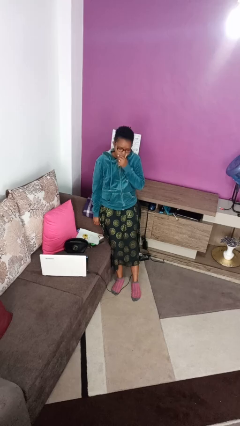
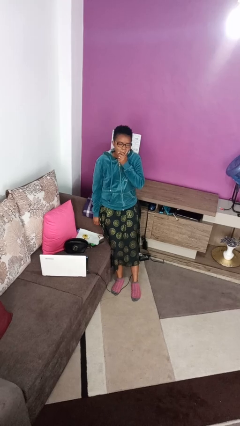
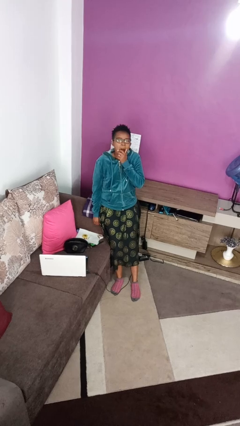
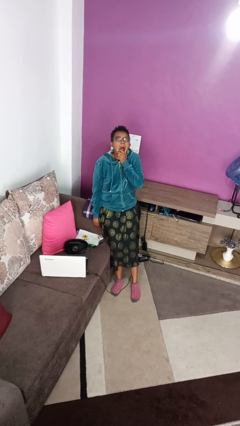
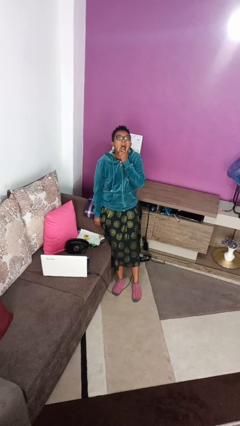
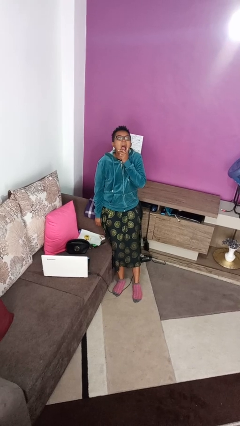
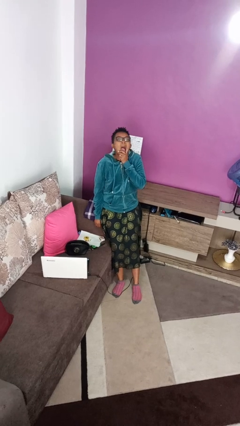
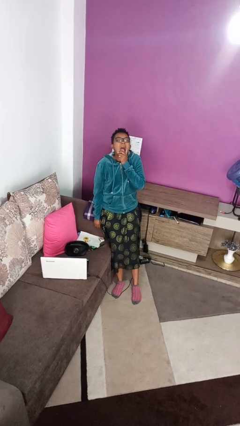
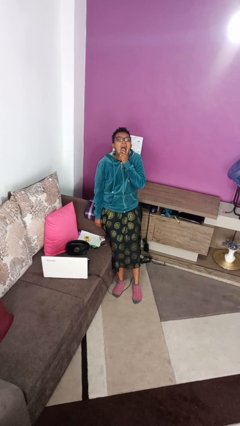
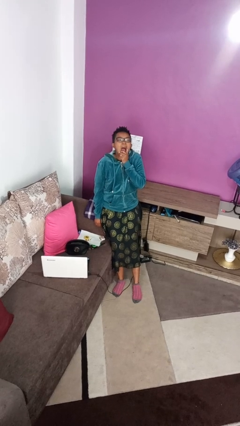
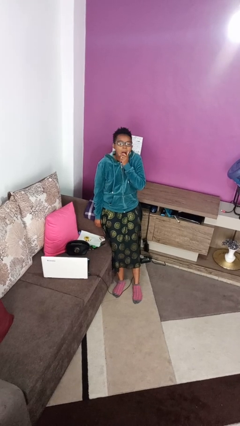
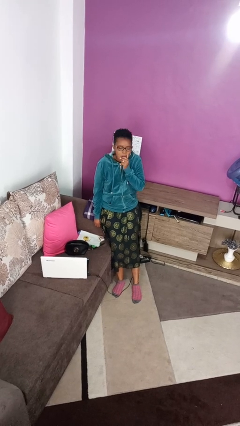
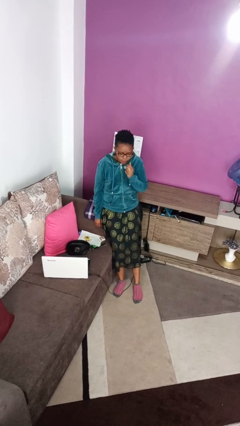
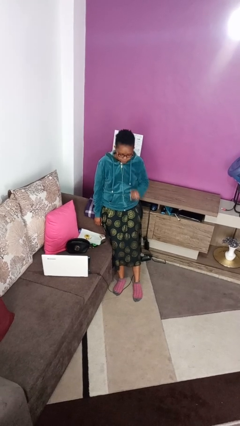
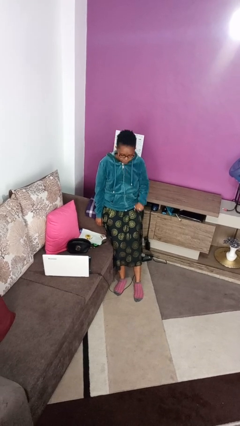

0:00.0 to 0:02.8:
person yawns

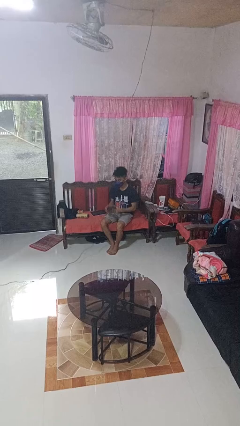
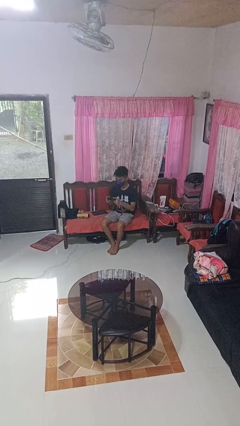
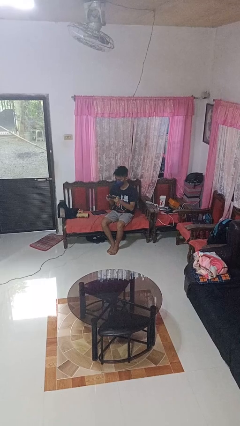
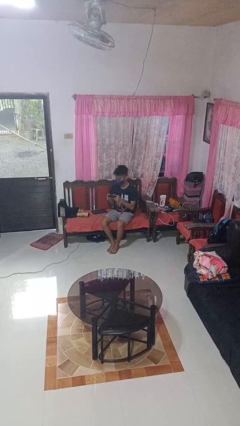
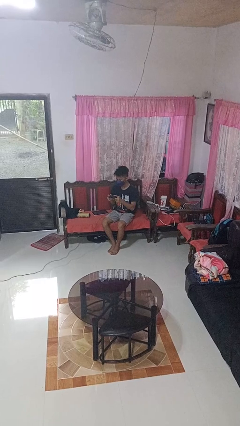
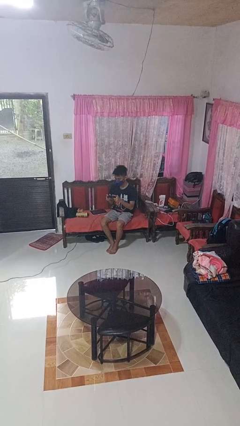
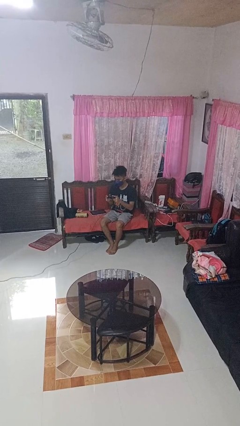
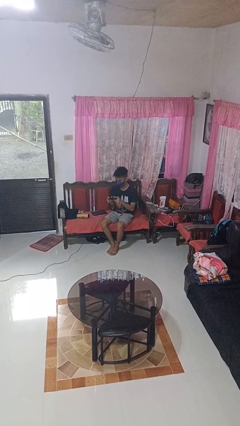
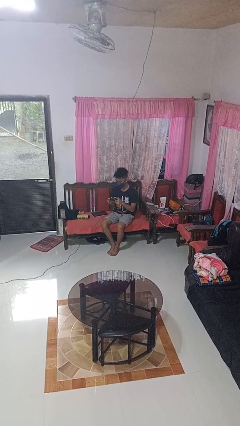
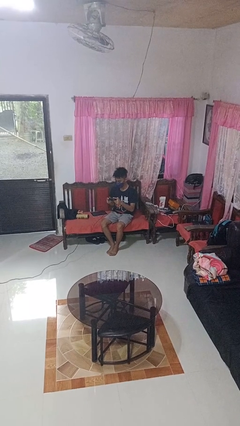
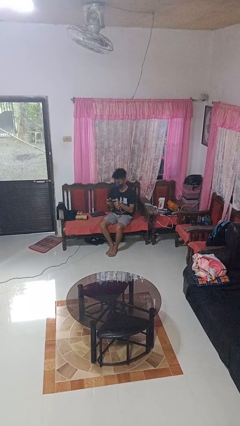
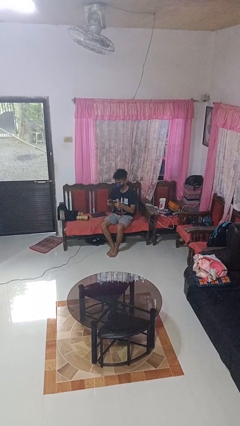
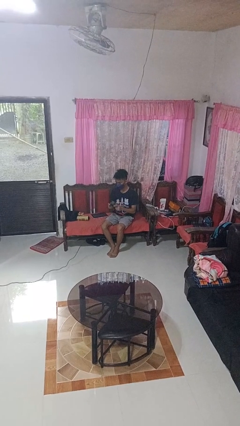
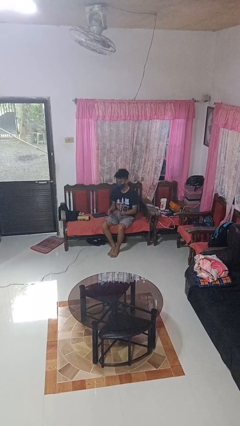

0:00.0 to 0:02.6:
person interacts with handheld game

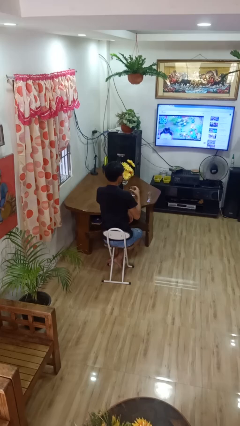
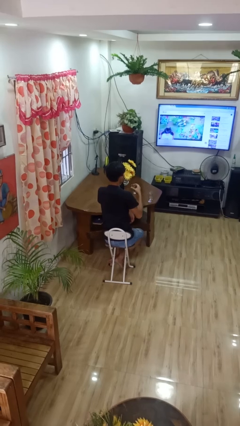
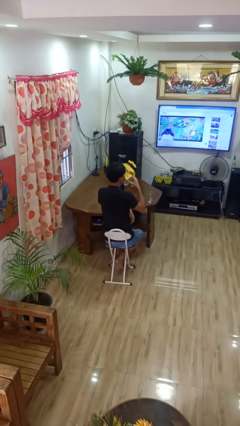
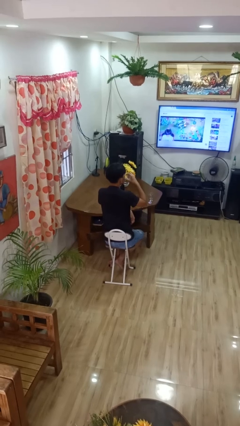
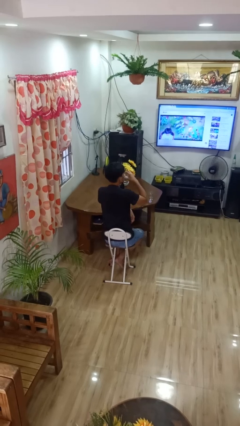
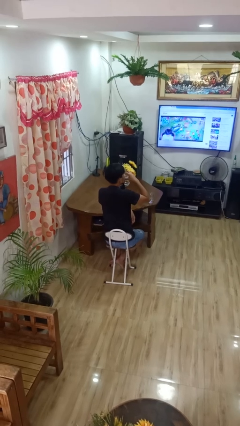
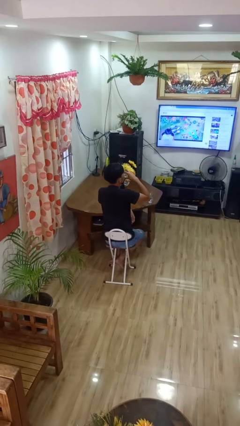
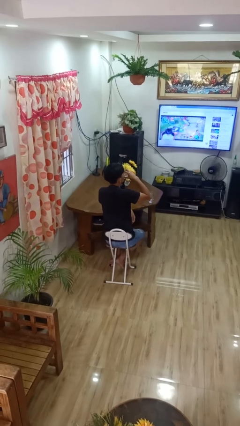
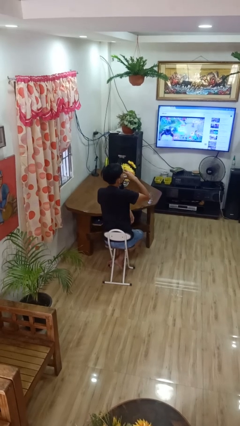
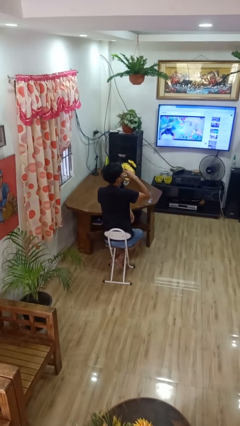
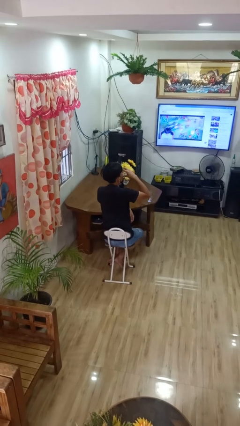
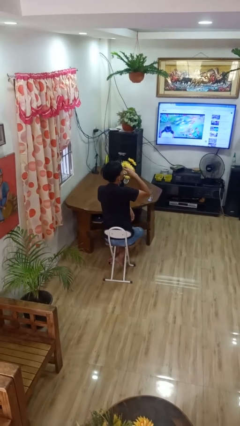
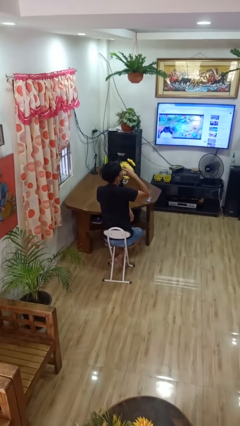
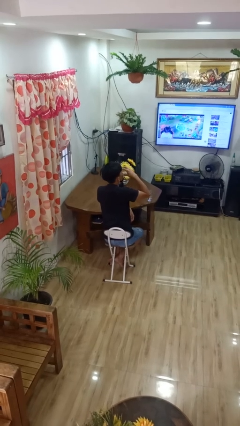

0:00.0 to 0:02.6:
person drinks from shotglass

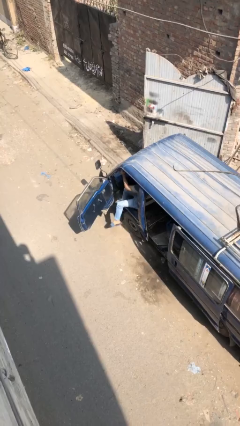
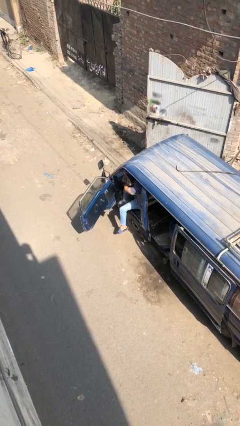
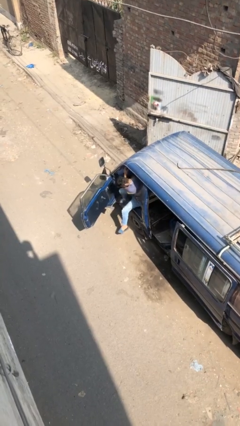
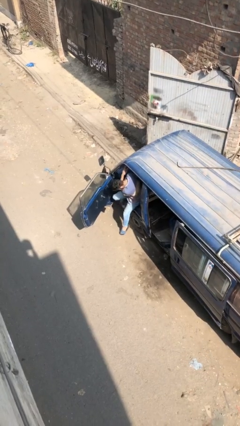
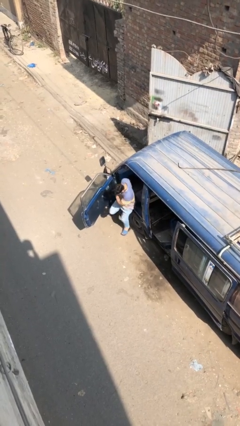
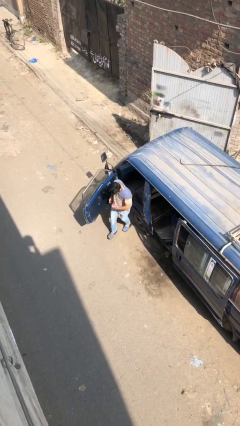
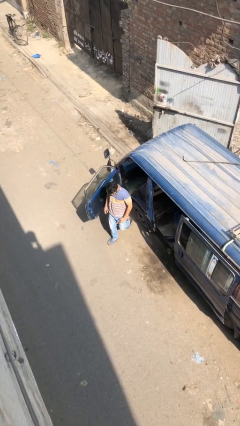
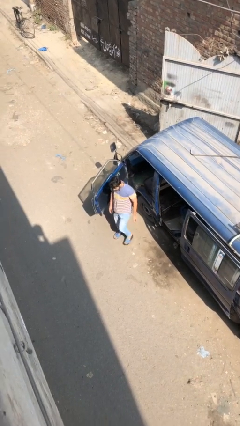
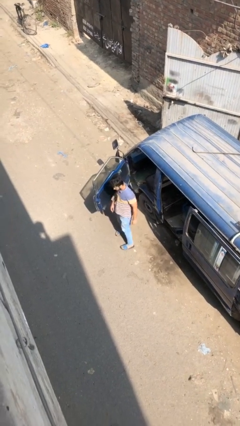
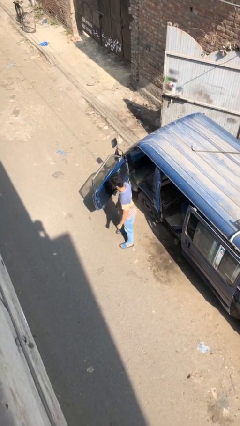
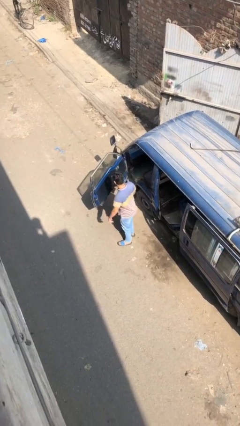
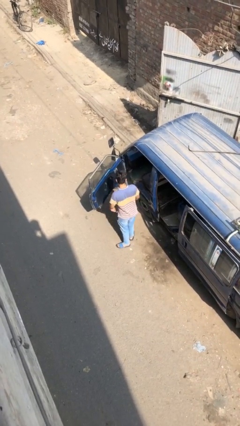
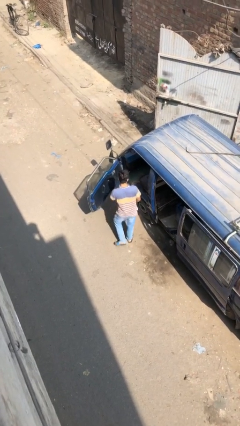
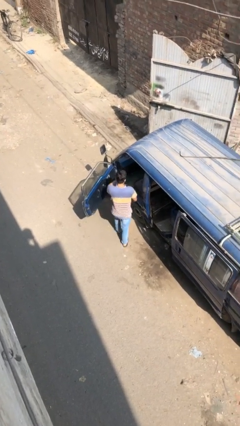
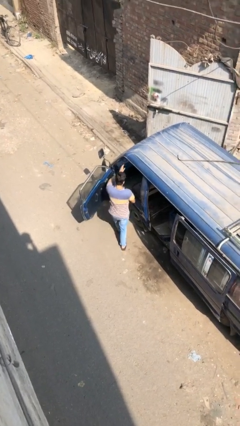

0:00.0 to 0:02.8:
person exits car

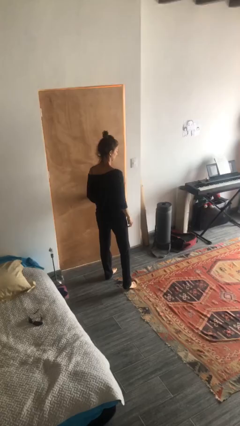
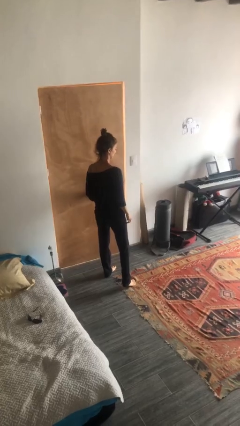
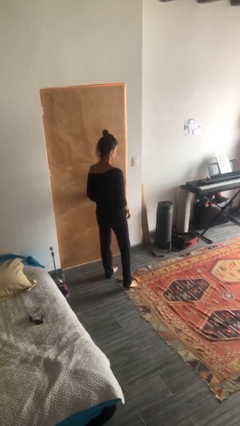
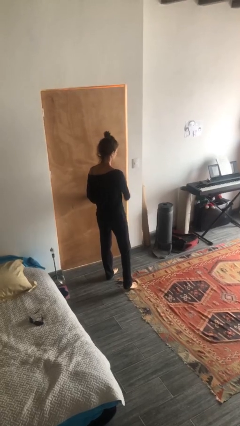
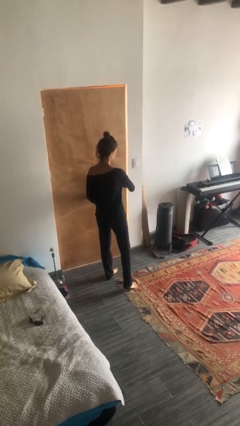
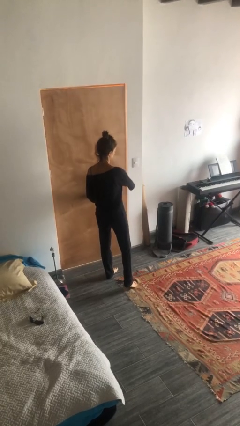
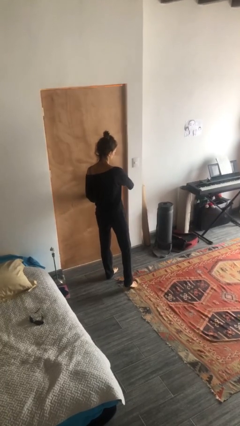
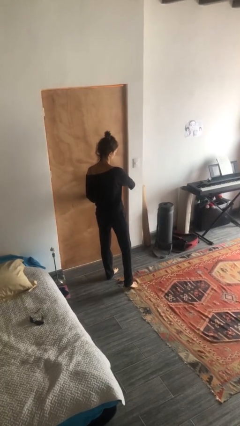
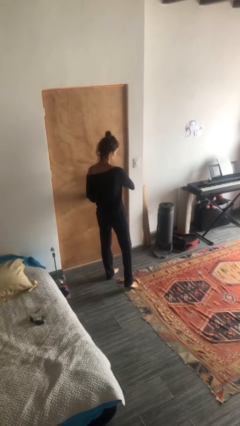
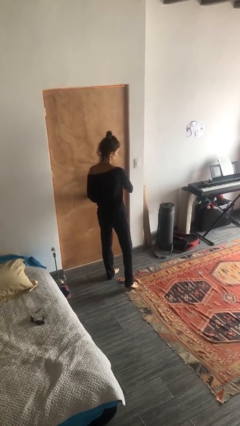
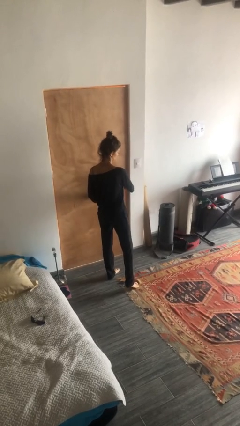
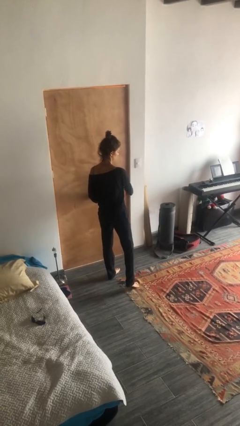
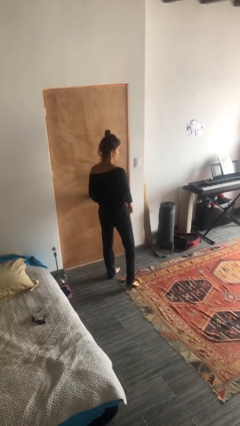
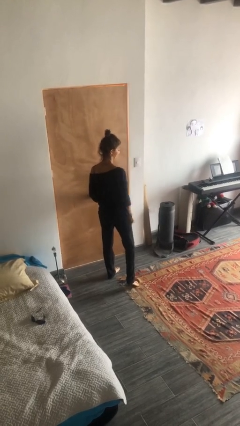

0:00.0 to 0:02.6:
person locks door with keys

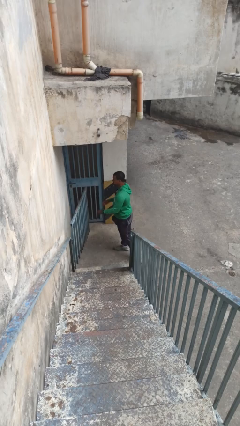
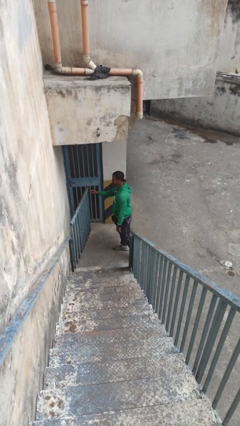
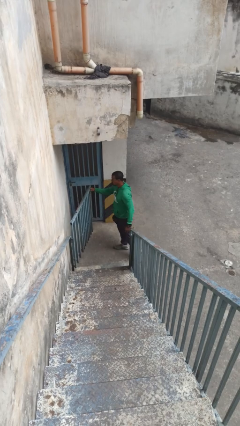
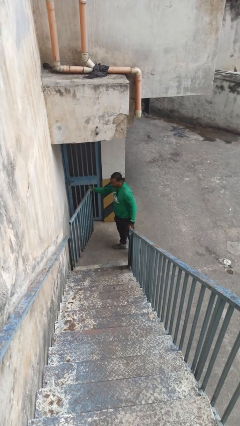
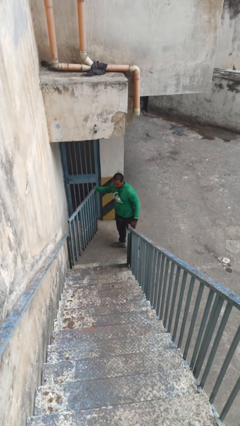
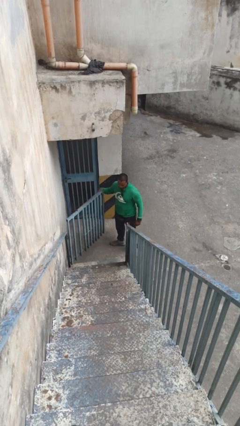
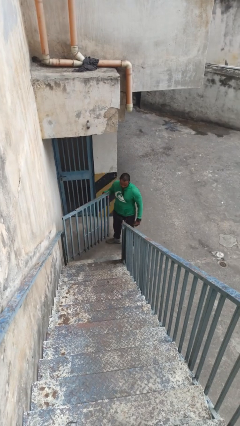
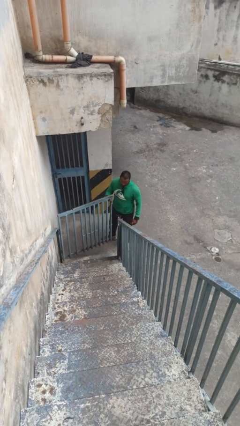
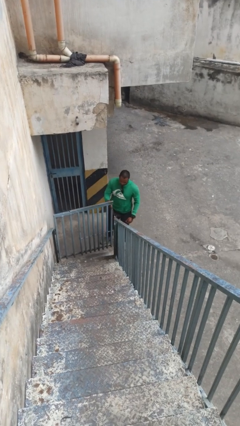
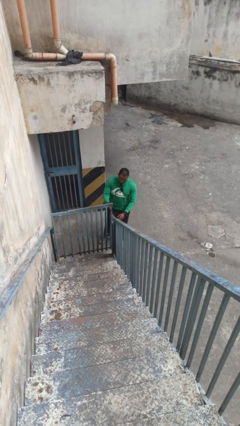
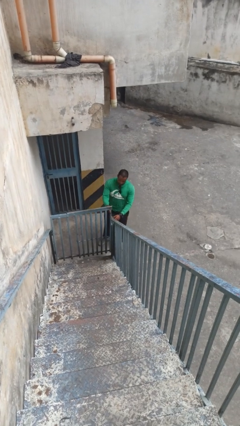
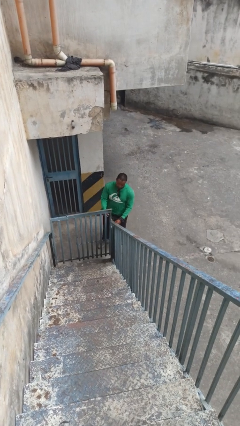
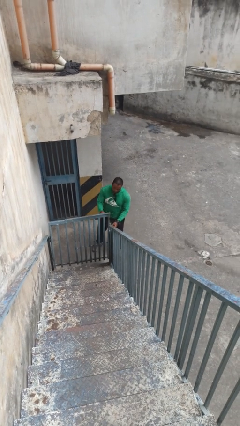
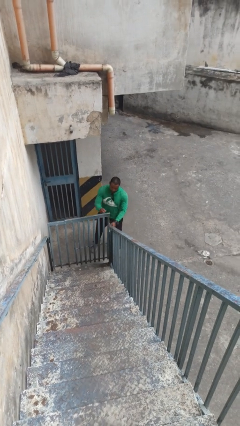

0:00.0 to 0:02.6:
person closes facility door

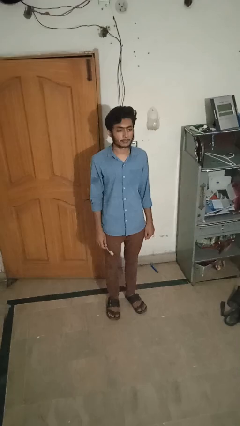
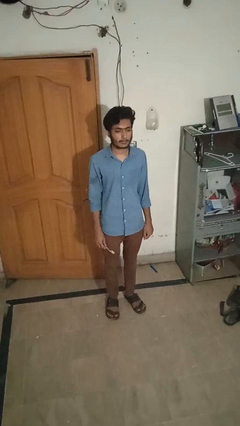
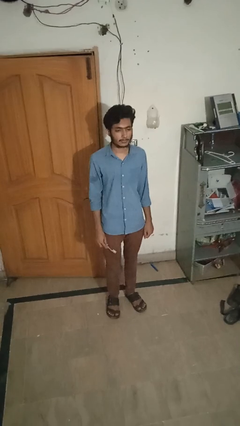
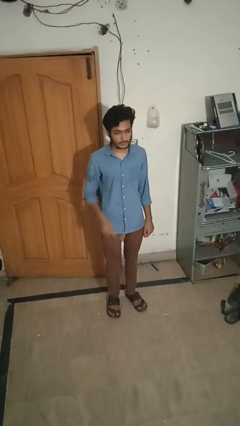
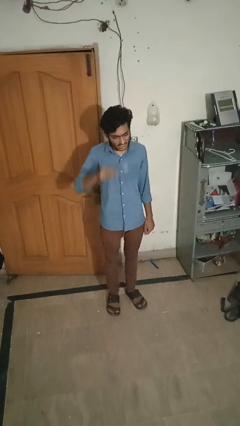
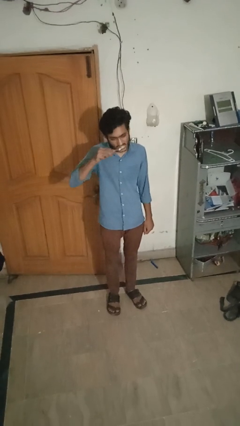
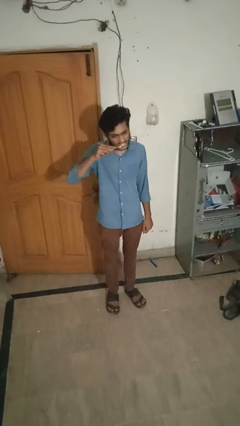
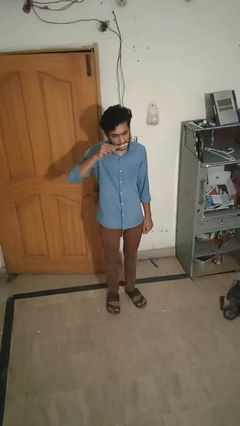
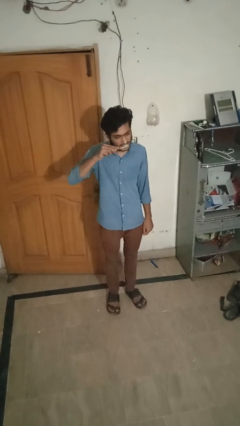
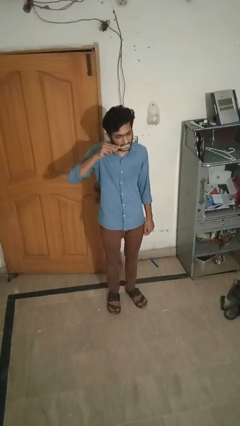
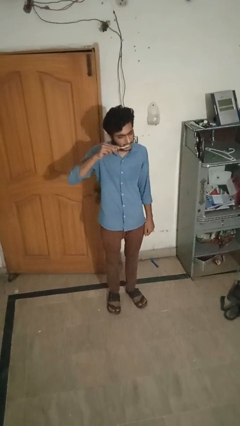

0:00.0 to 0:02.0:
person brushes teeth
